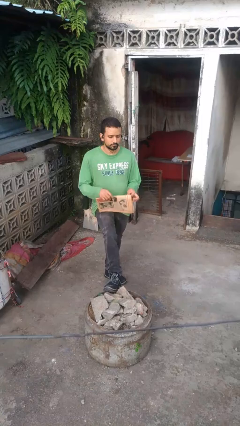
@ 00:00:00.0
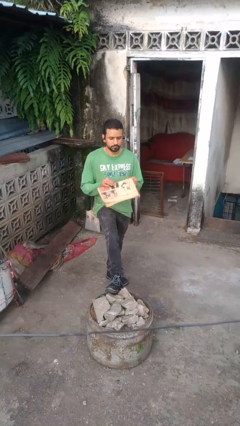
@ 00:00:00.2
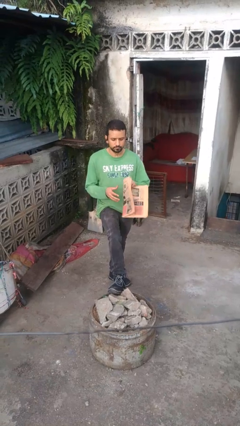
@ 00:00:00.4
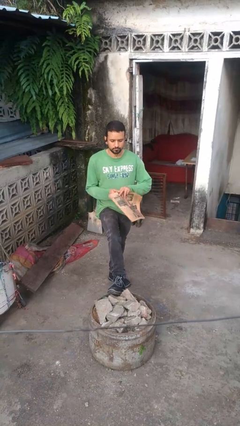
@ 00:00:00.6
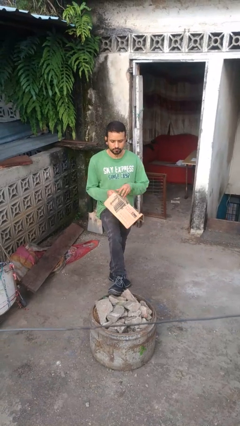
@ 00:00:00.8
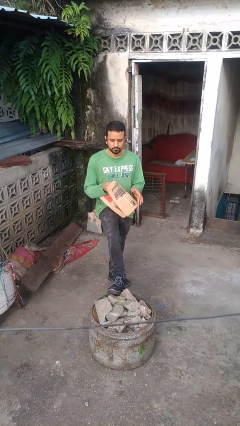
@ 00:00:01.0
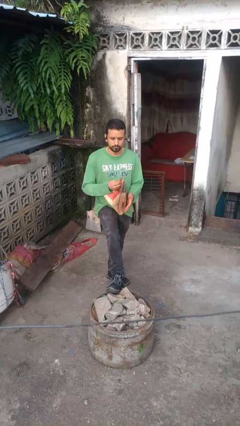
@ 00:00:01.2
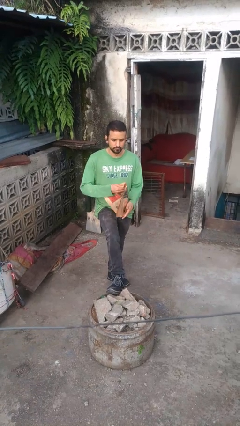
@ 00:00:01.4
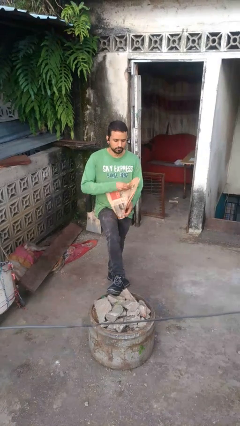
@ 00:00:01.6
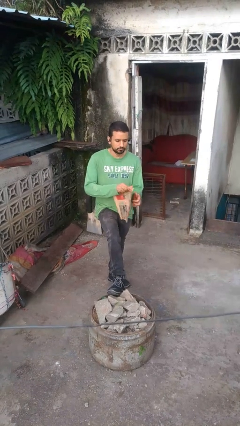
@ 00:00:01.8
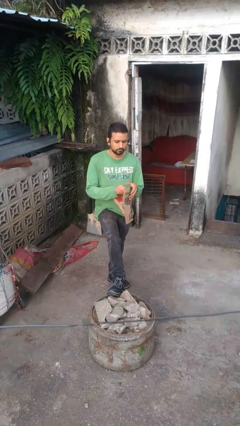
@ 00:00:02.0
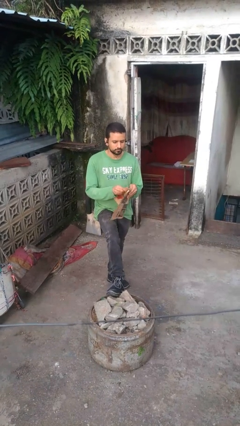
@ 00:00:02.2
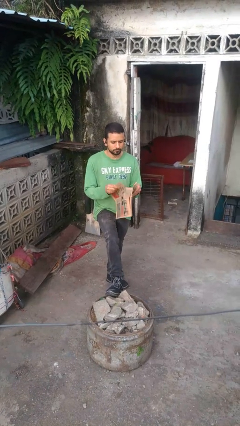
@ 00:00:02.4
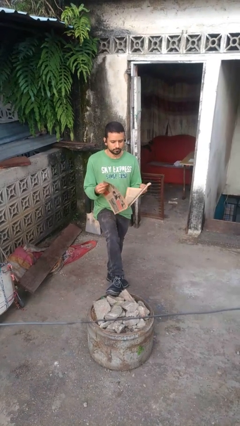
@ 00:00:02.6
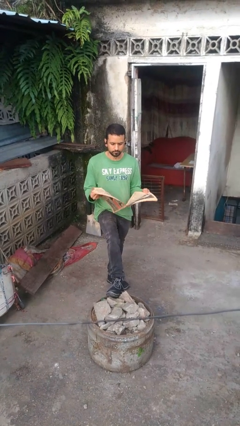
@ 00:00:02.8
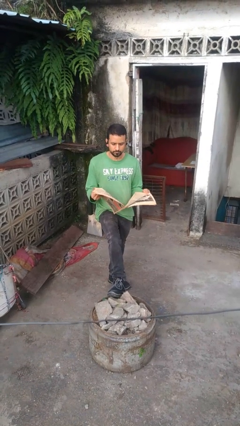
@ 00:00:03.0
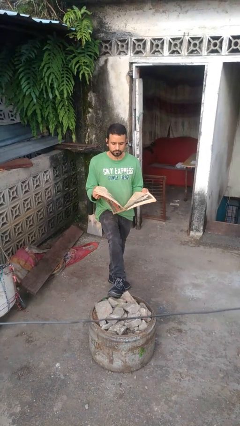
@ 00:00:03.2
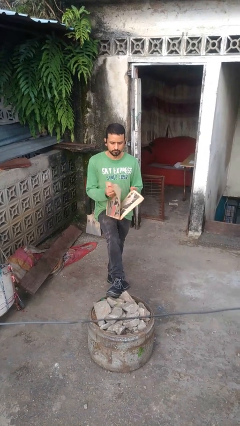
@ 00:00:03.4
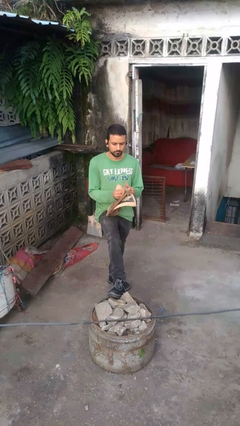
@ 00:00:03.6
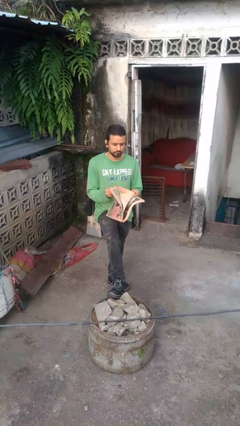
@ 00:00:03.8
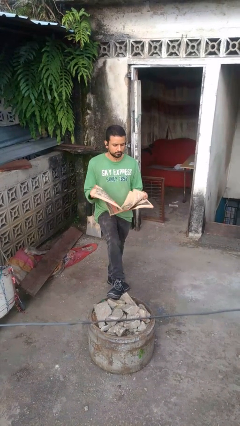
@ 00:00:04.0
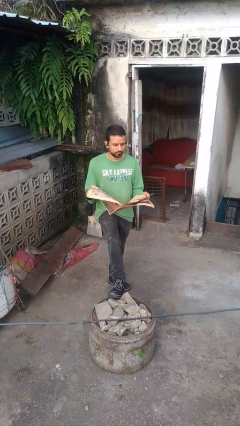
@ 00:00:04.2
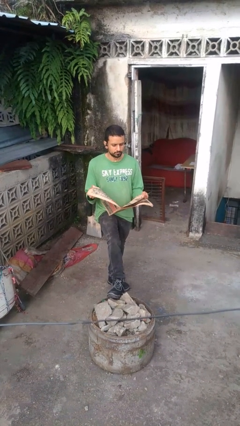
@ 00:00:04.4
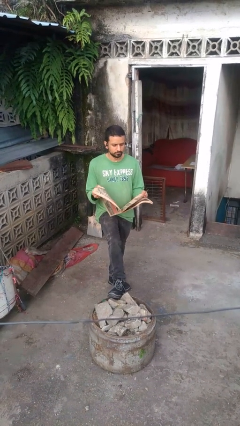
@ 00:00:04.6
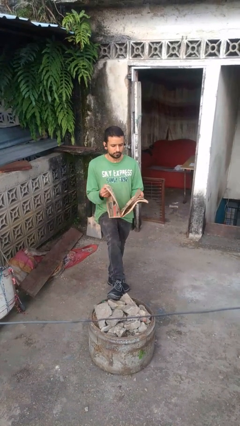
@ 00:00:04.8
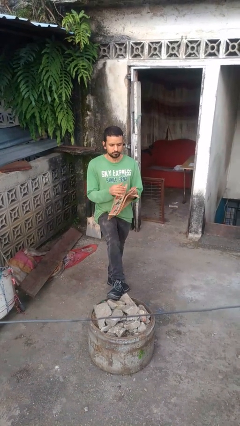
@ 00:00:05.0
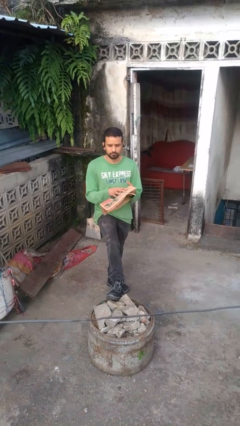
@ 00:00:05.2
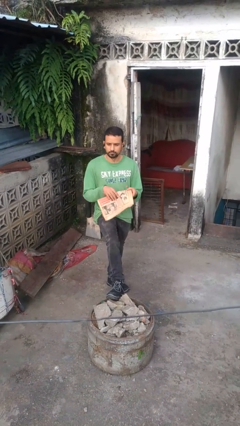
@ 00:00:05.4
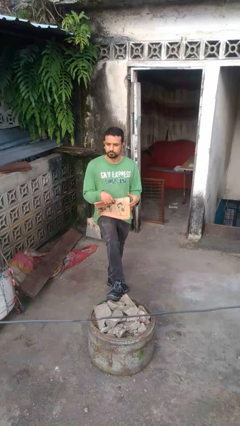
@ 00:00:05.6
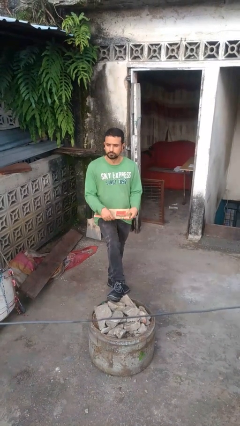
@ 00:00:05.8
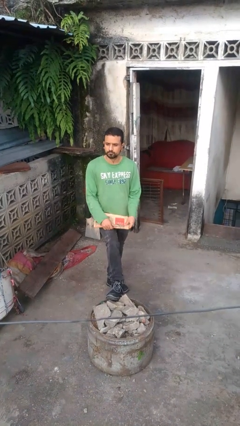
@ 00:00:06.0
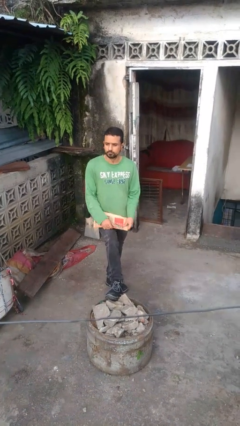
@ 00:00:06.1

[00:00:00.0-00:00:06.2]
person reads newspaper

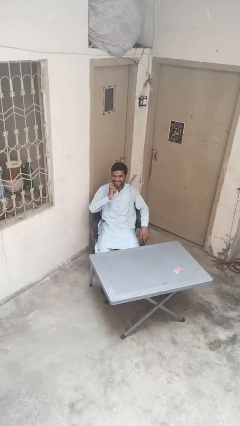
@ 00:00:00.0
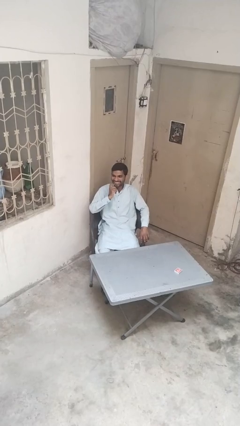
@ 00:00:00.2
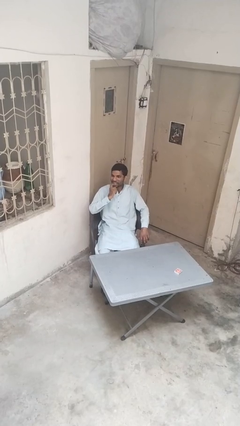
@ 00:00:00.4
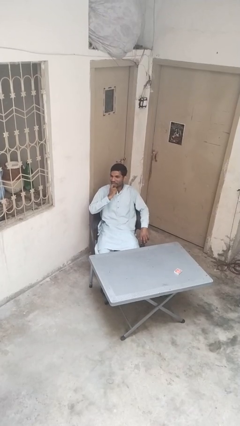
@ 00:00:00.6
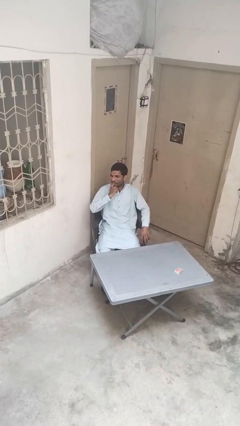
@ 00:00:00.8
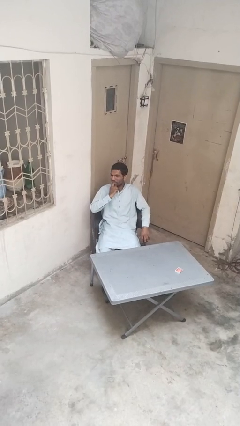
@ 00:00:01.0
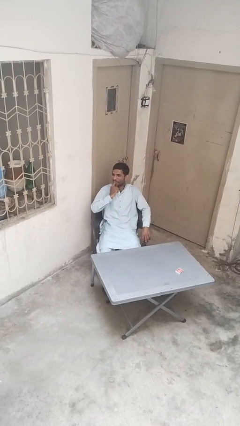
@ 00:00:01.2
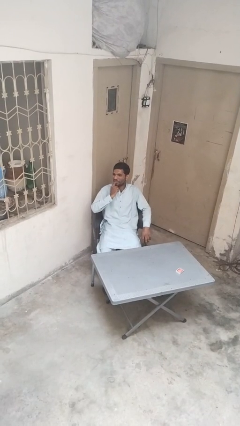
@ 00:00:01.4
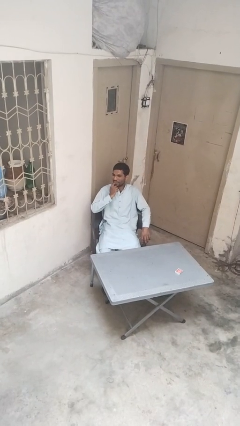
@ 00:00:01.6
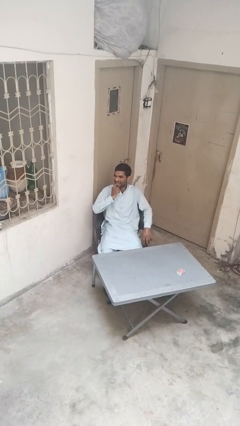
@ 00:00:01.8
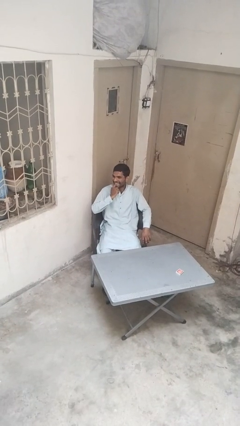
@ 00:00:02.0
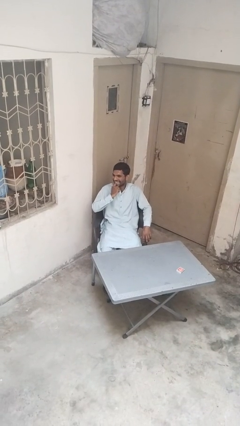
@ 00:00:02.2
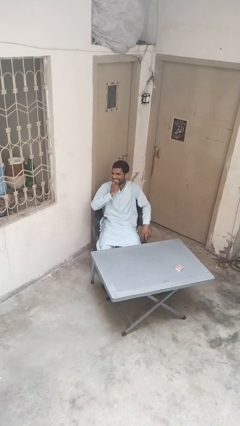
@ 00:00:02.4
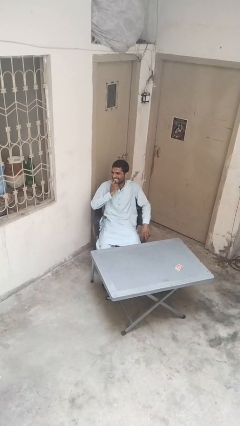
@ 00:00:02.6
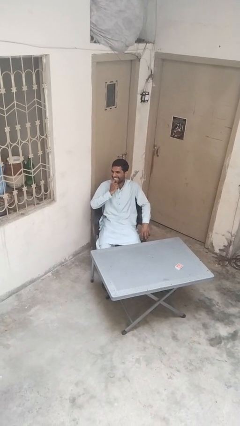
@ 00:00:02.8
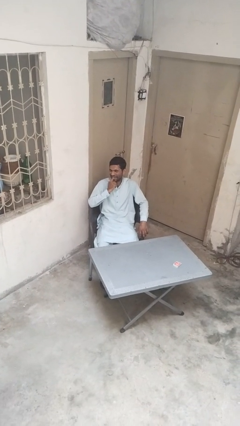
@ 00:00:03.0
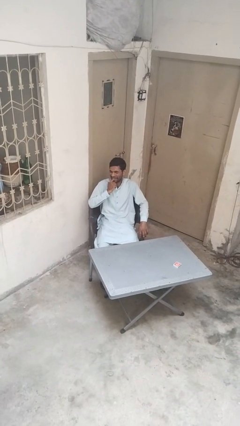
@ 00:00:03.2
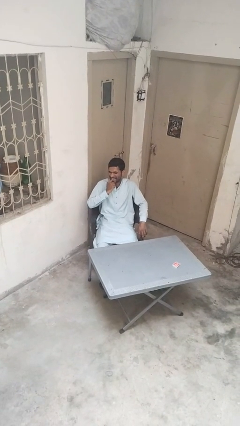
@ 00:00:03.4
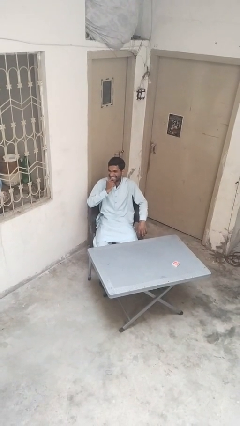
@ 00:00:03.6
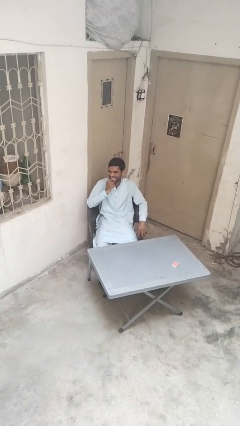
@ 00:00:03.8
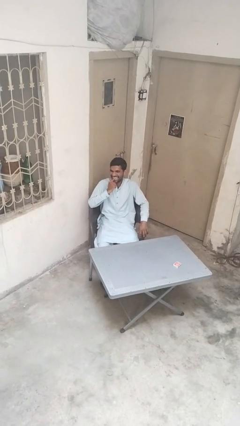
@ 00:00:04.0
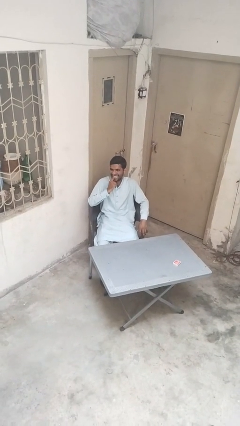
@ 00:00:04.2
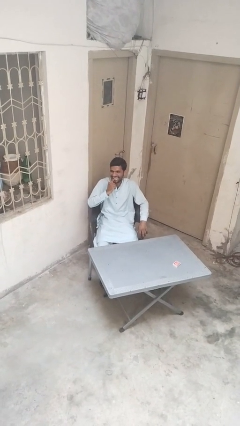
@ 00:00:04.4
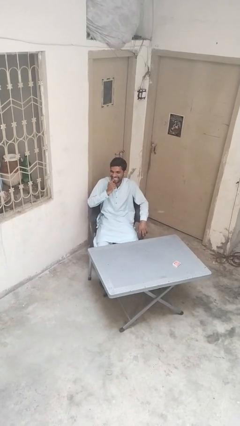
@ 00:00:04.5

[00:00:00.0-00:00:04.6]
person licks fingers

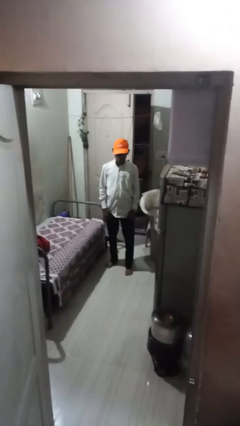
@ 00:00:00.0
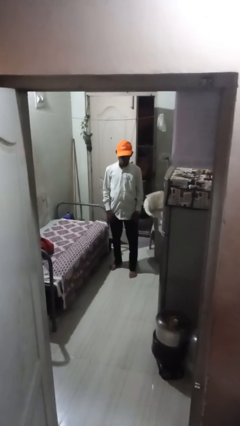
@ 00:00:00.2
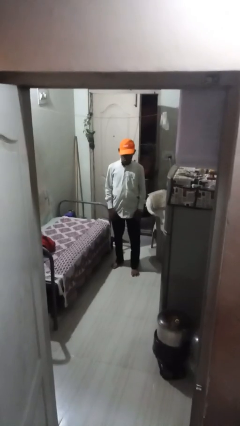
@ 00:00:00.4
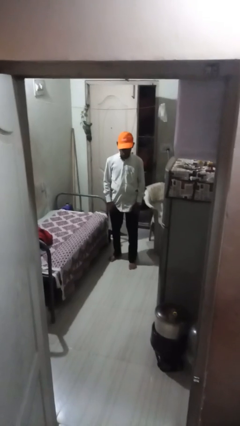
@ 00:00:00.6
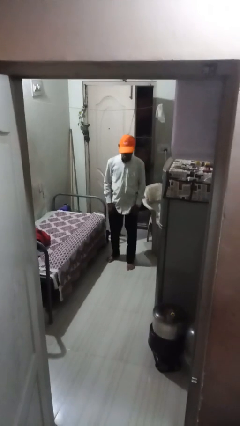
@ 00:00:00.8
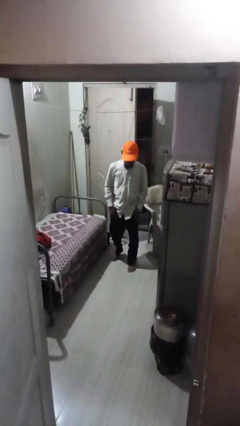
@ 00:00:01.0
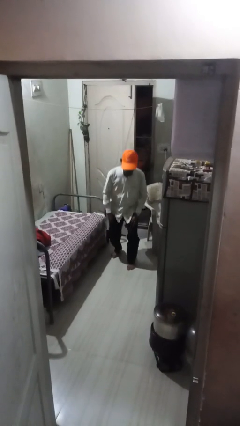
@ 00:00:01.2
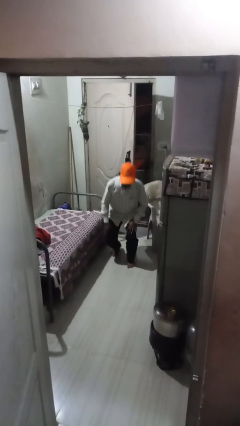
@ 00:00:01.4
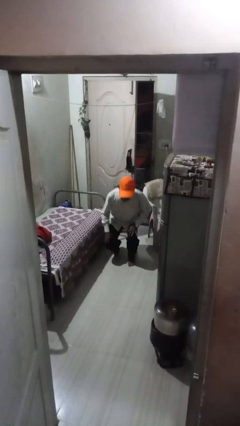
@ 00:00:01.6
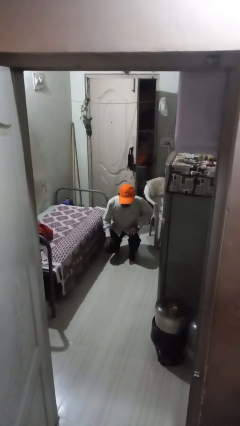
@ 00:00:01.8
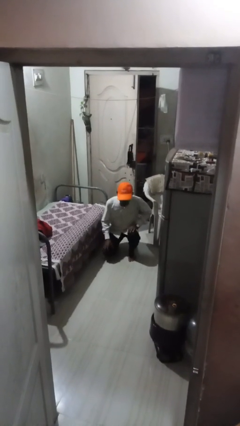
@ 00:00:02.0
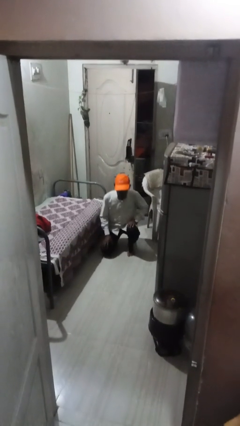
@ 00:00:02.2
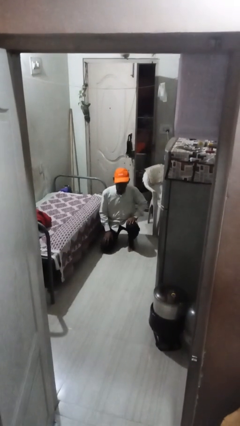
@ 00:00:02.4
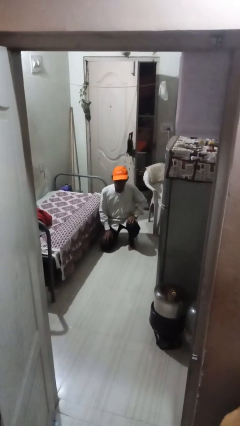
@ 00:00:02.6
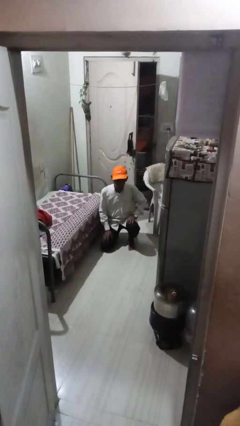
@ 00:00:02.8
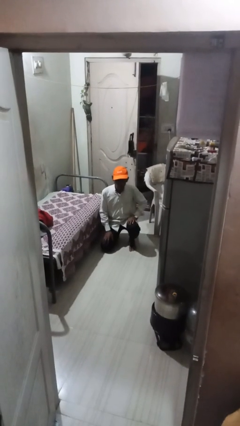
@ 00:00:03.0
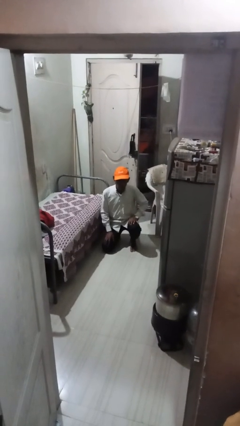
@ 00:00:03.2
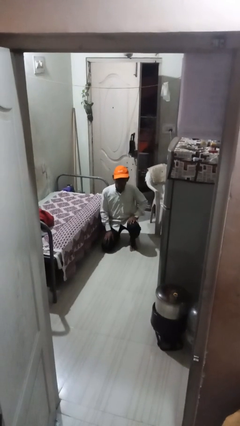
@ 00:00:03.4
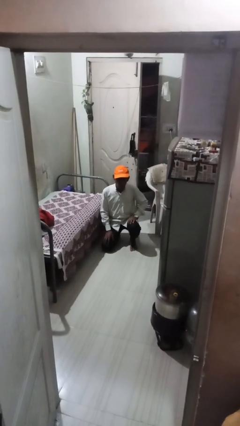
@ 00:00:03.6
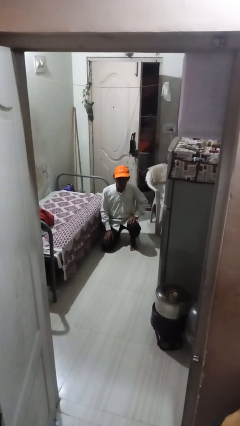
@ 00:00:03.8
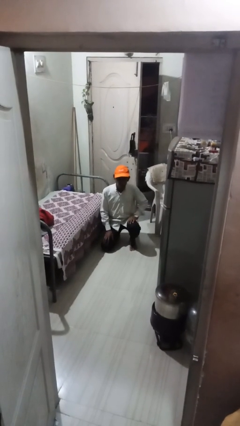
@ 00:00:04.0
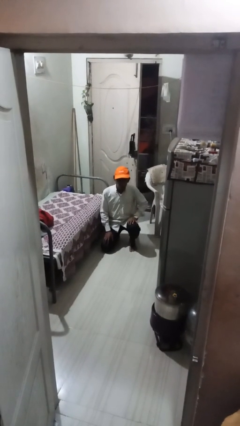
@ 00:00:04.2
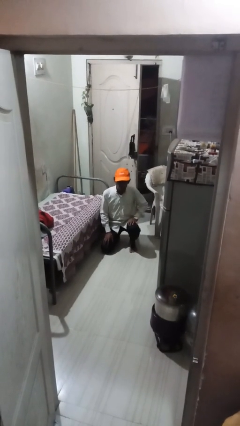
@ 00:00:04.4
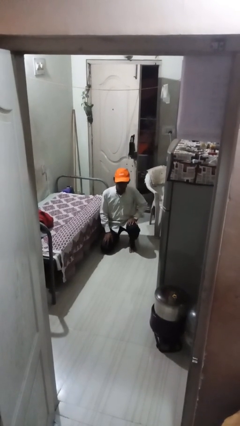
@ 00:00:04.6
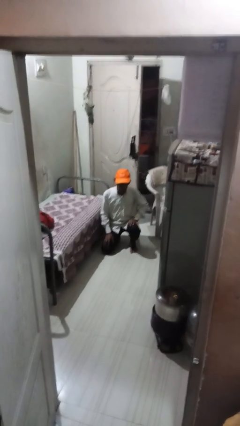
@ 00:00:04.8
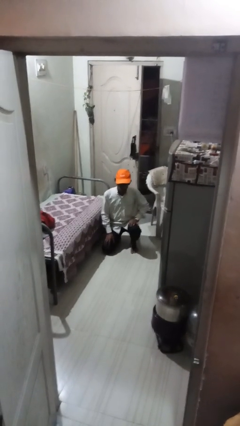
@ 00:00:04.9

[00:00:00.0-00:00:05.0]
person kneels

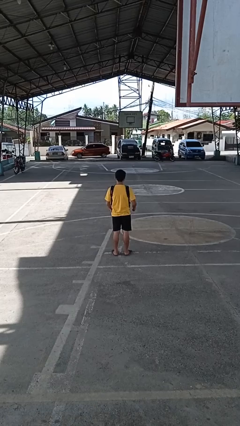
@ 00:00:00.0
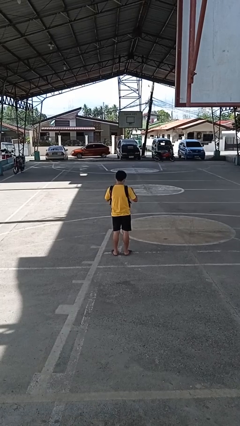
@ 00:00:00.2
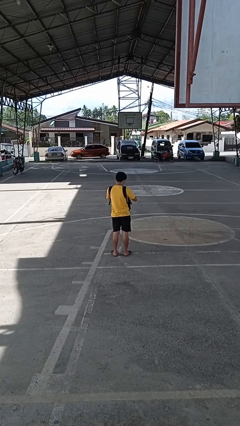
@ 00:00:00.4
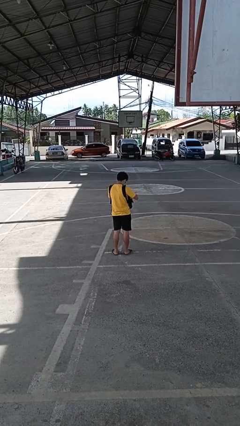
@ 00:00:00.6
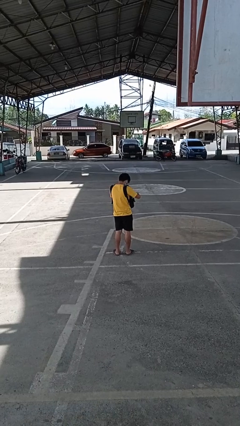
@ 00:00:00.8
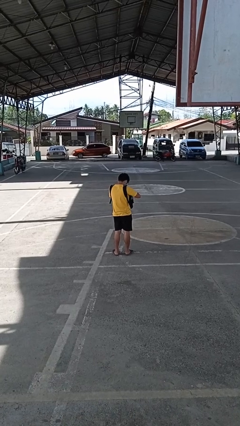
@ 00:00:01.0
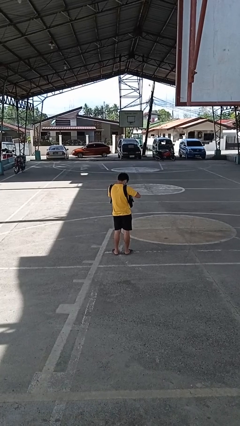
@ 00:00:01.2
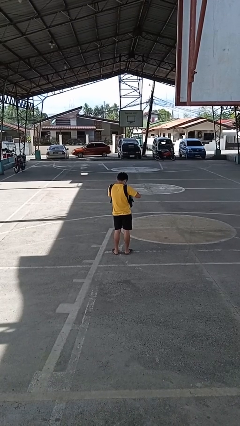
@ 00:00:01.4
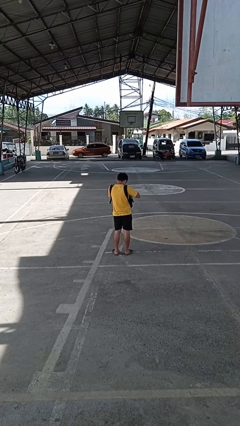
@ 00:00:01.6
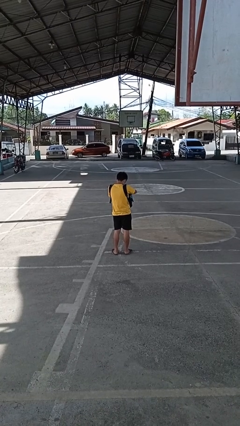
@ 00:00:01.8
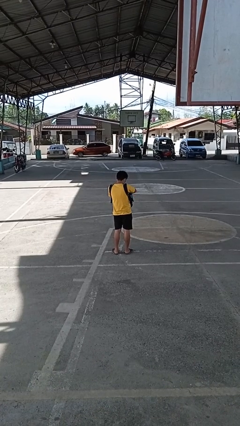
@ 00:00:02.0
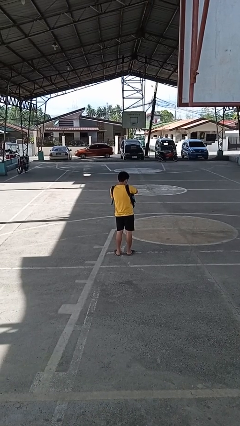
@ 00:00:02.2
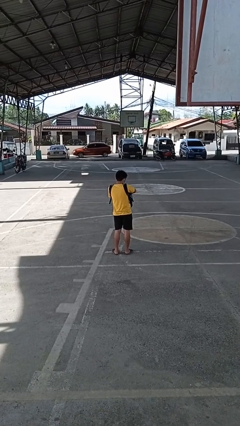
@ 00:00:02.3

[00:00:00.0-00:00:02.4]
person searches in backpack
